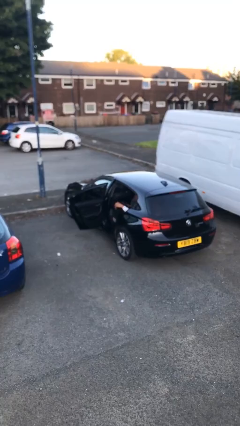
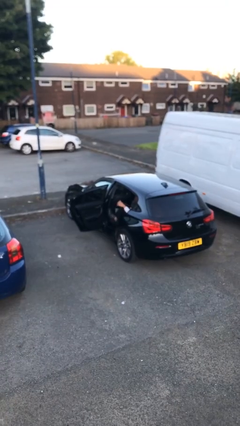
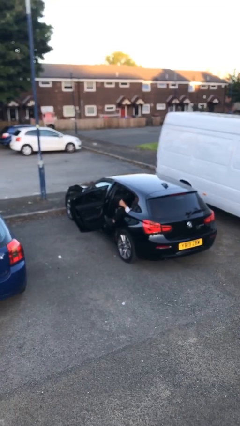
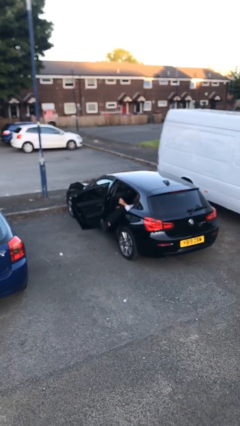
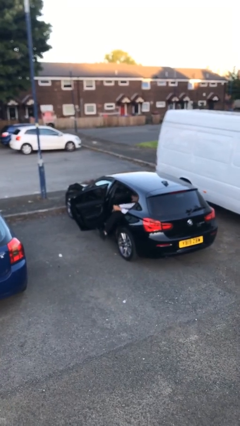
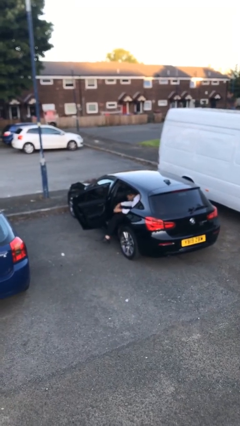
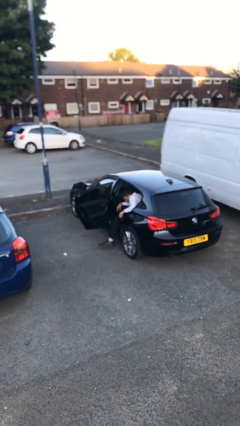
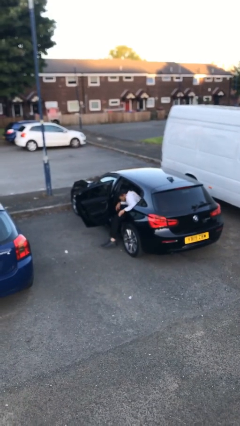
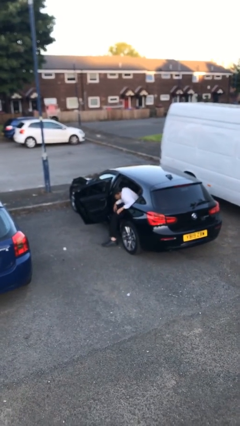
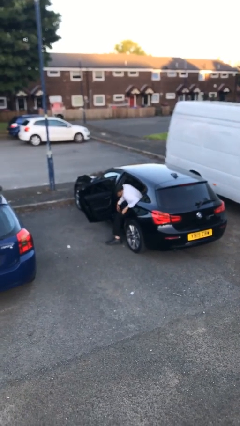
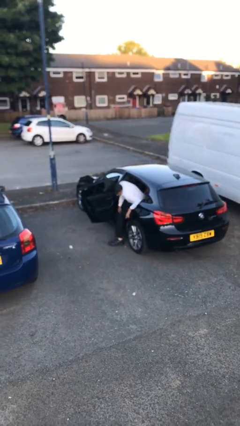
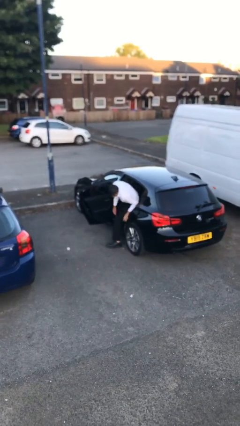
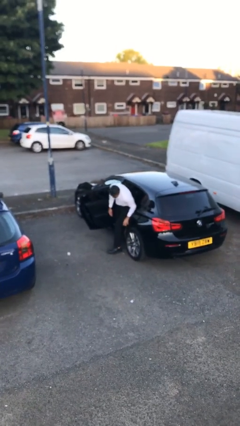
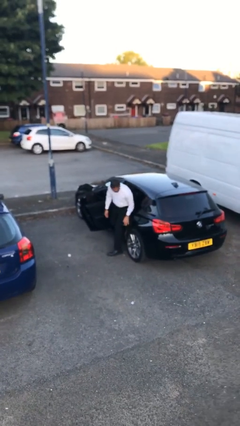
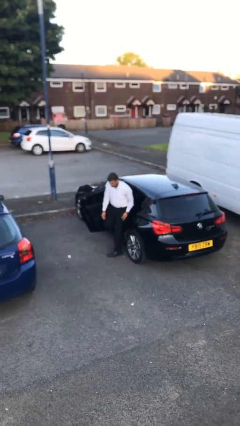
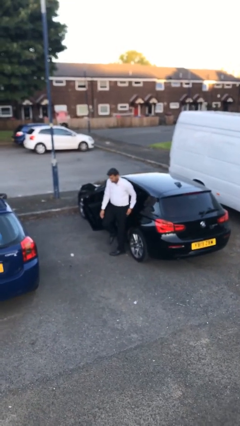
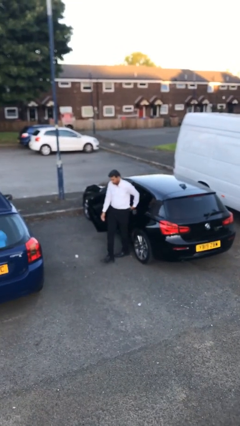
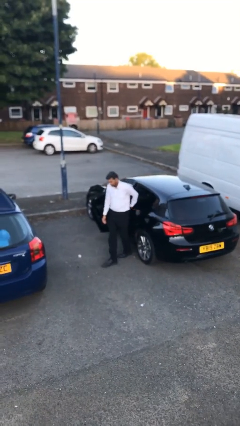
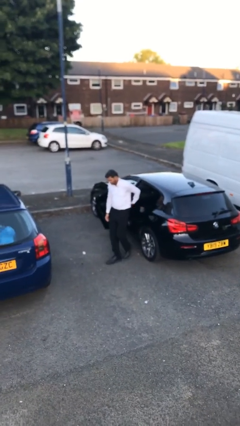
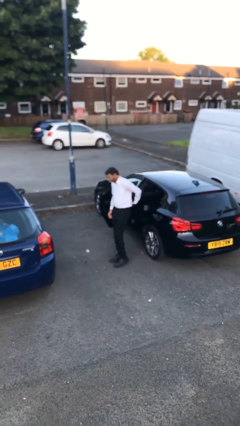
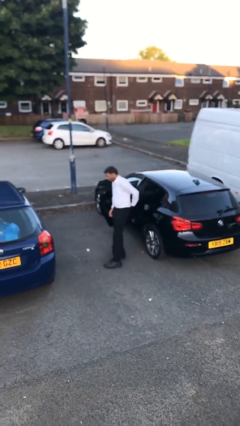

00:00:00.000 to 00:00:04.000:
person exits car

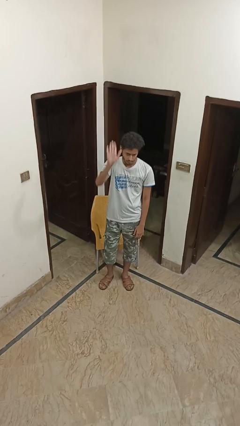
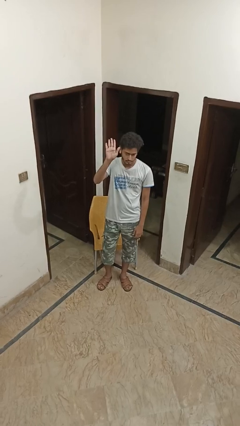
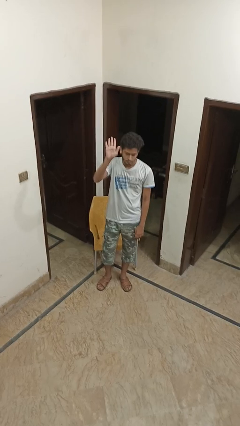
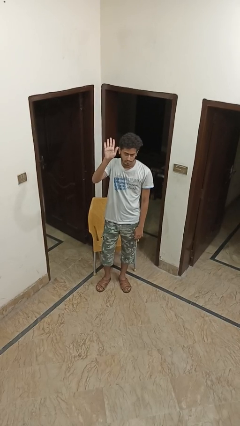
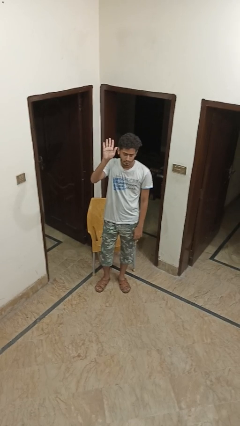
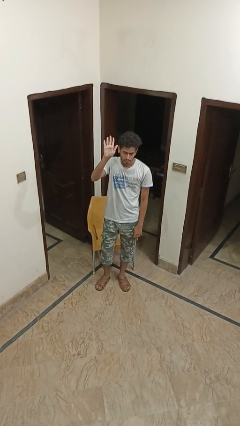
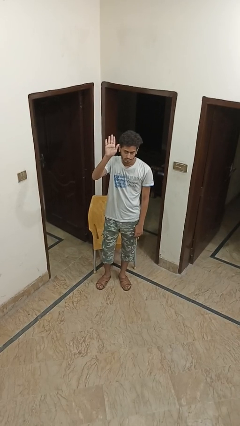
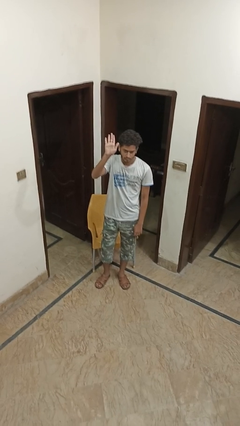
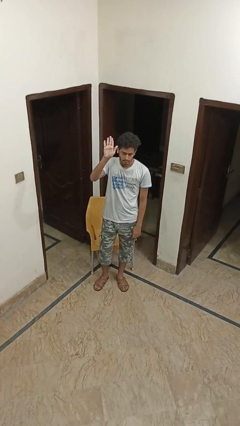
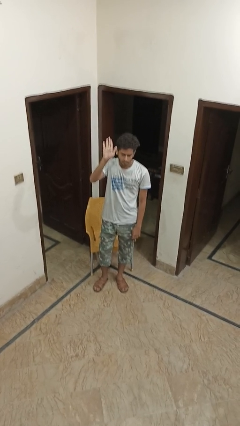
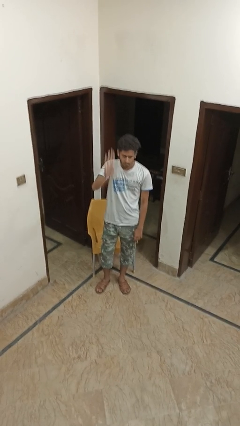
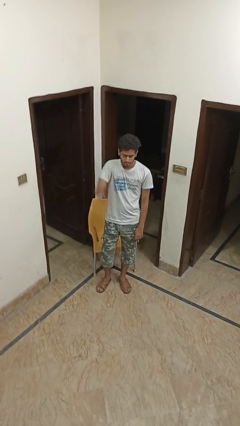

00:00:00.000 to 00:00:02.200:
person gestures raise hand

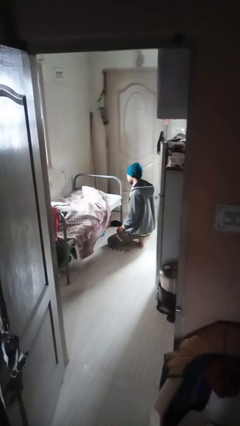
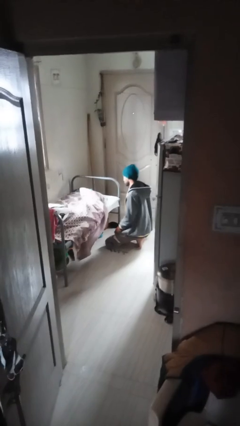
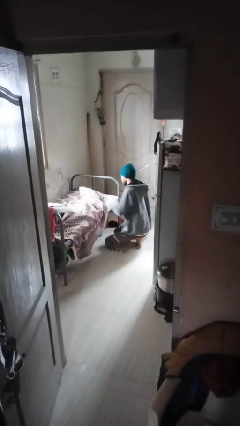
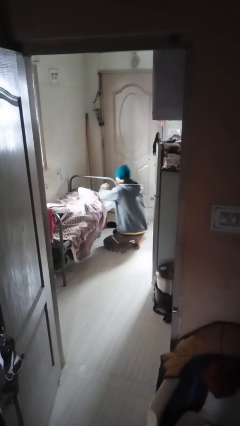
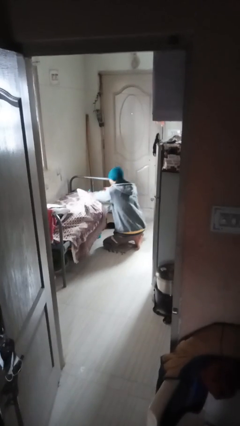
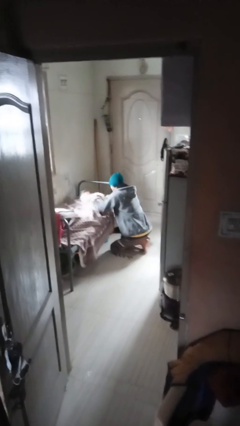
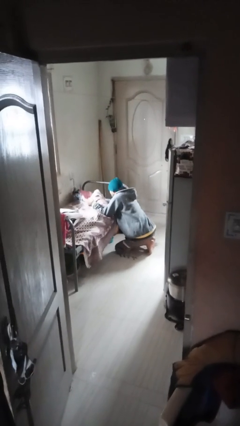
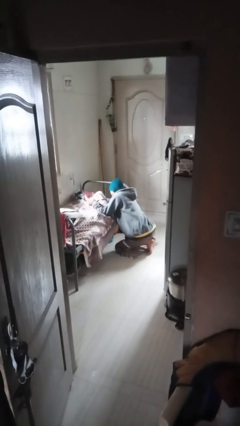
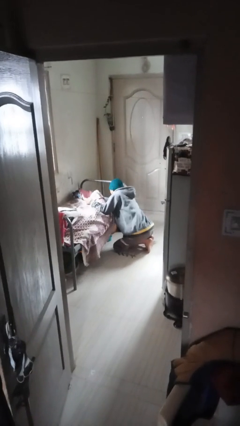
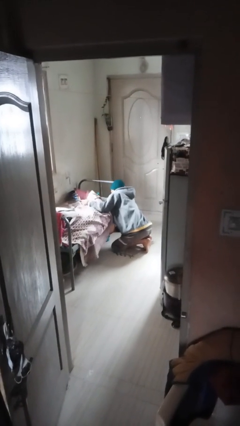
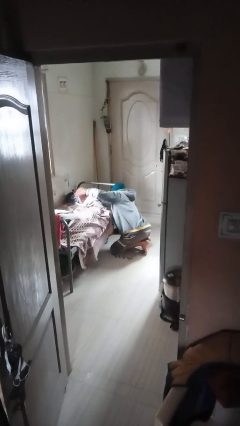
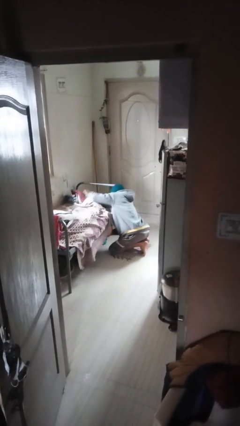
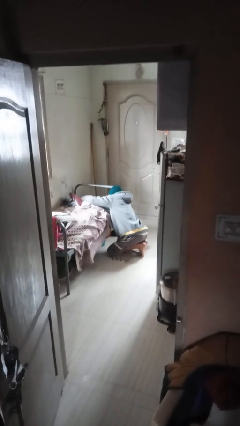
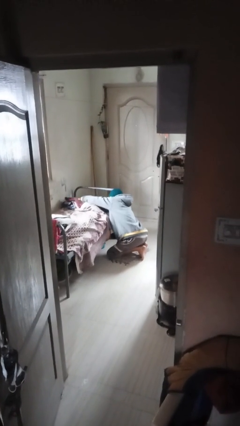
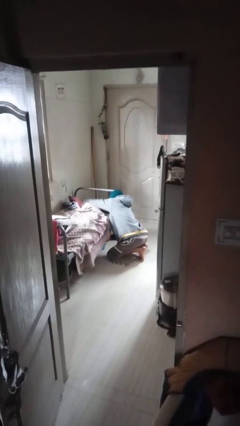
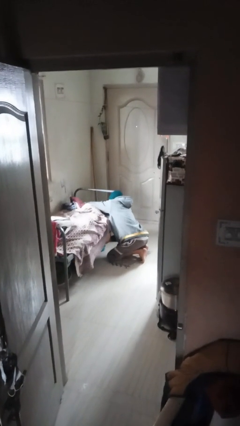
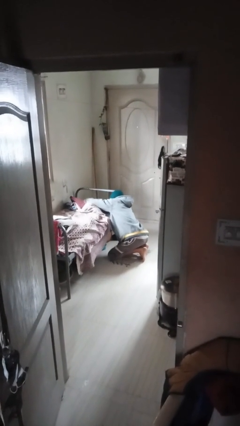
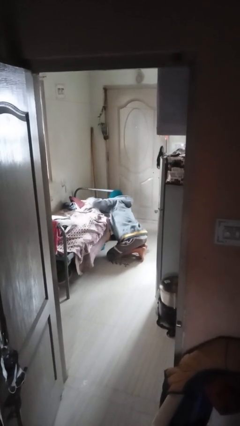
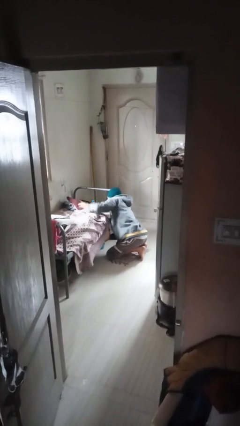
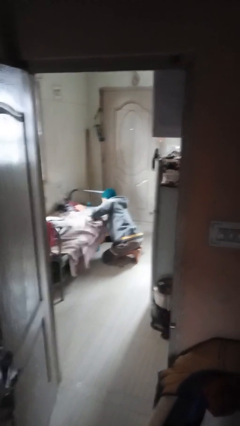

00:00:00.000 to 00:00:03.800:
person searches under couch

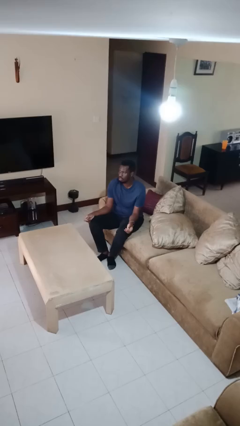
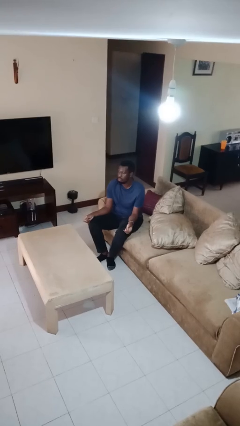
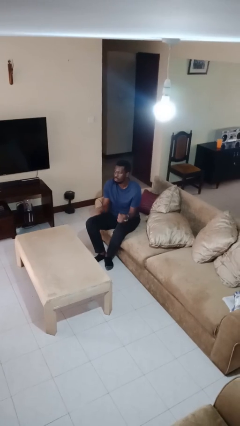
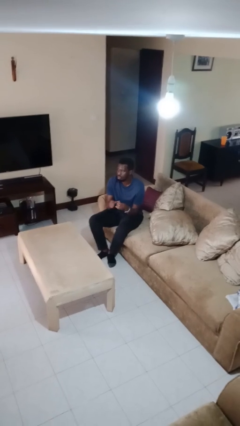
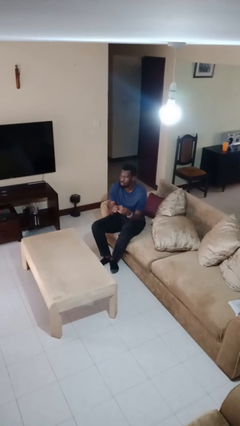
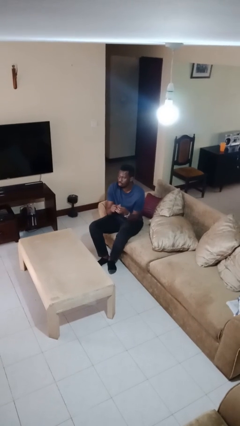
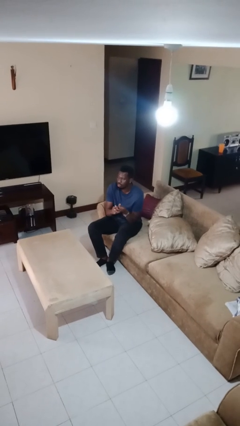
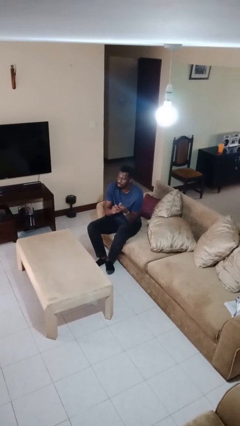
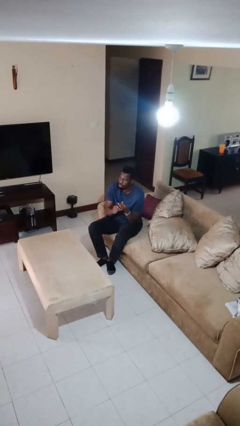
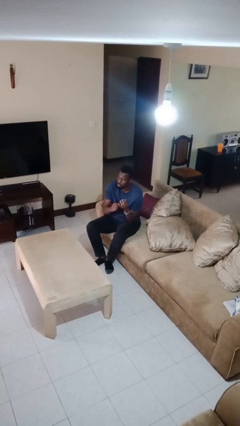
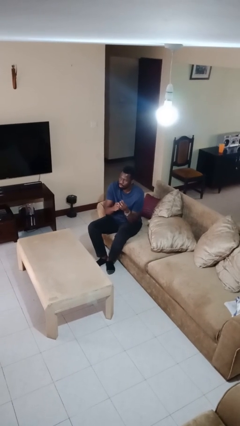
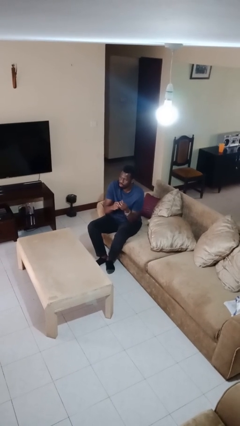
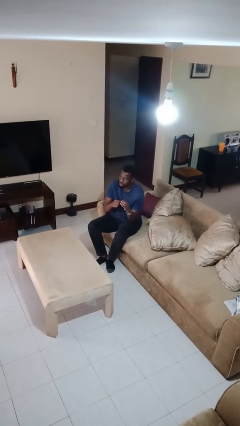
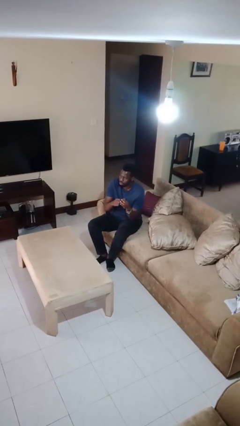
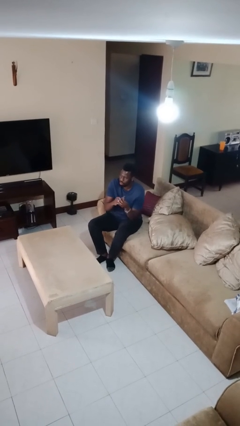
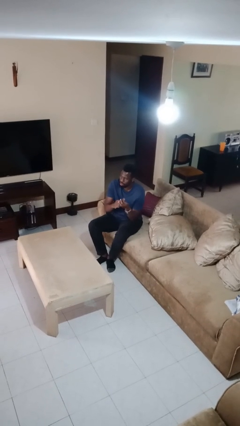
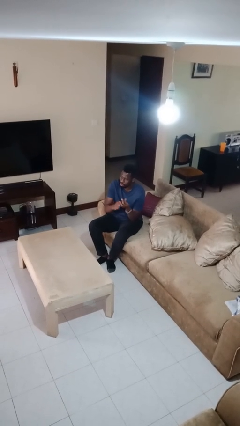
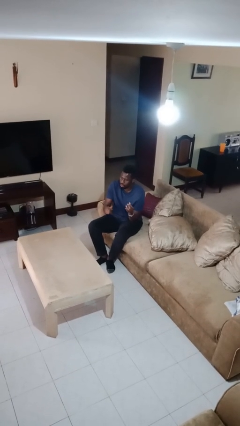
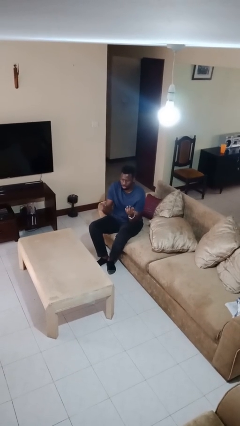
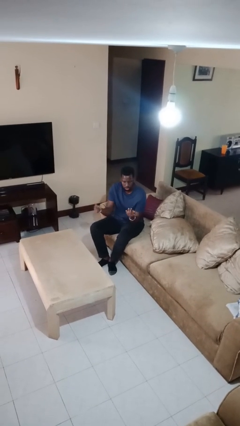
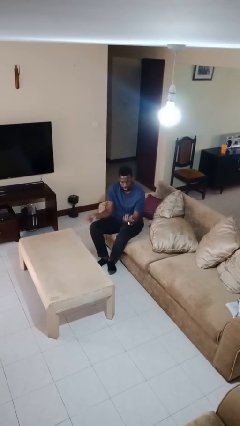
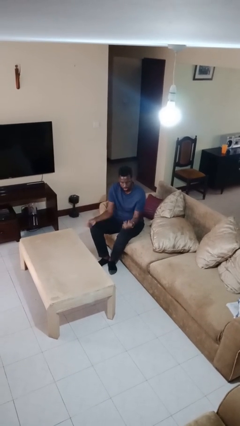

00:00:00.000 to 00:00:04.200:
person files fingernails

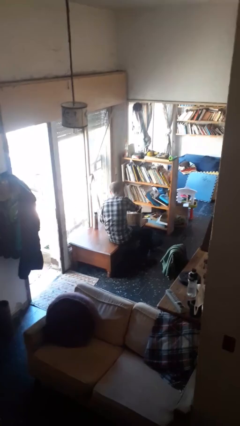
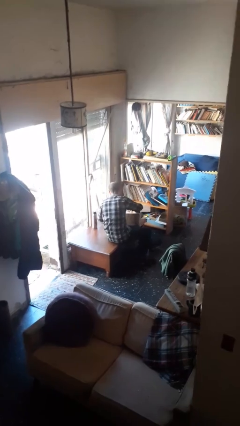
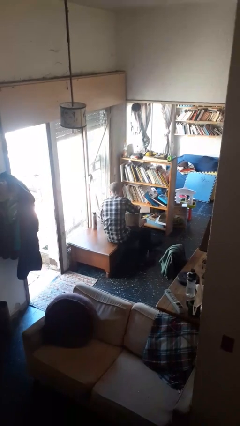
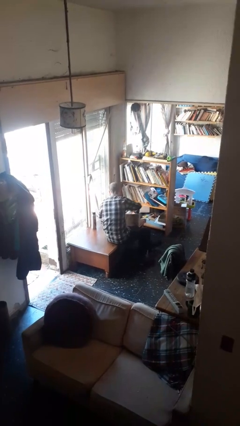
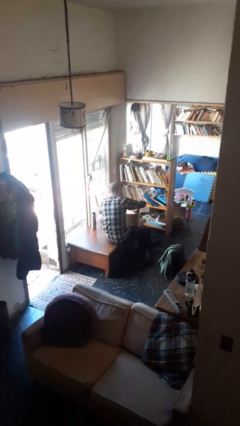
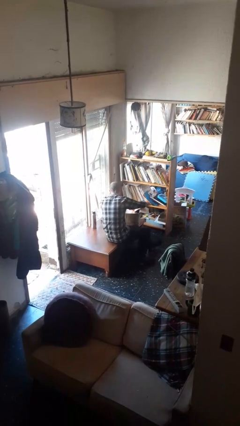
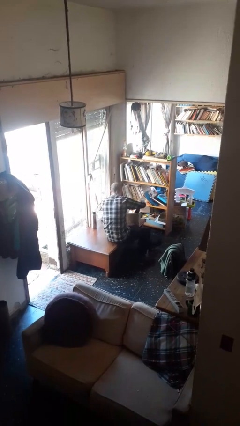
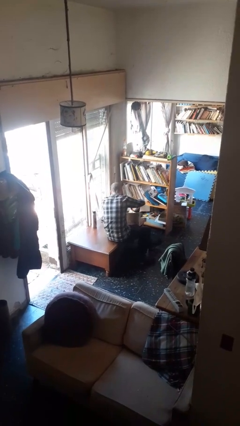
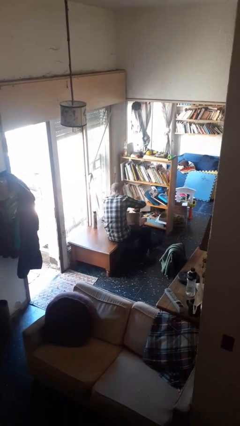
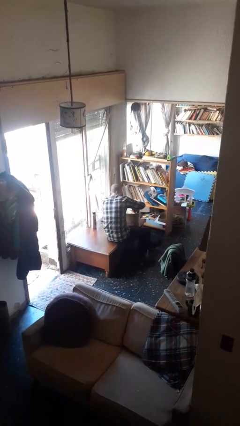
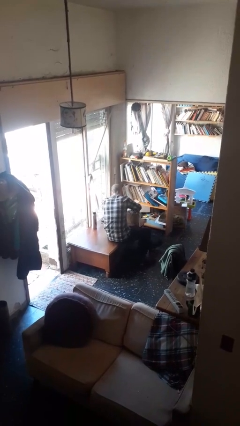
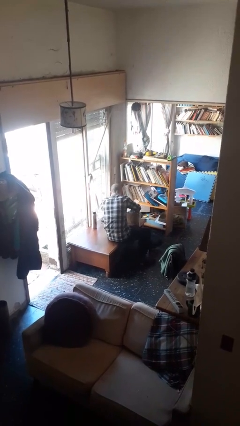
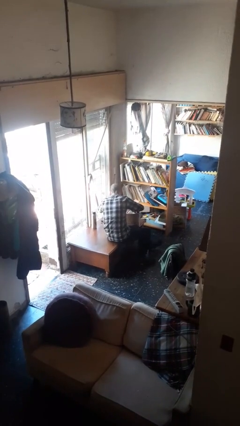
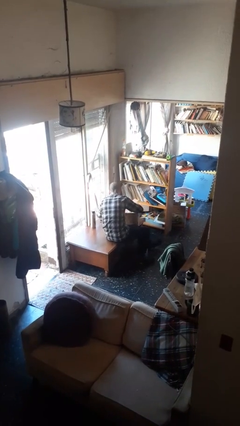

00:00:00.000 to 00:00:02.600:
person searches in box

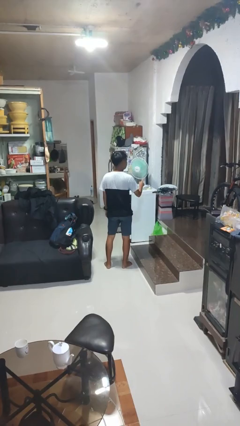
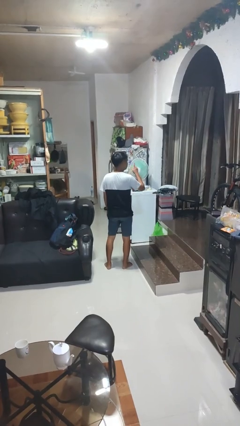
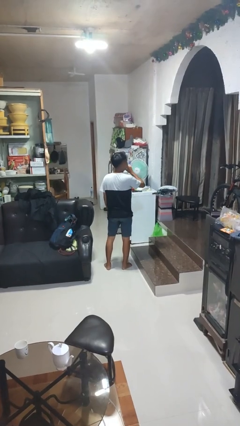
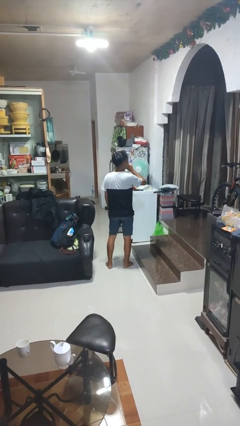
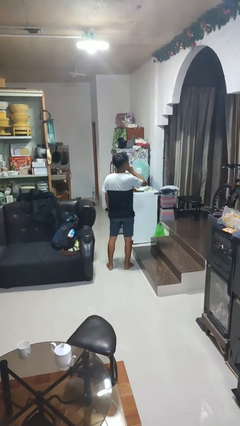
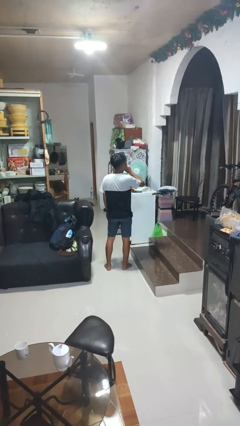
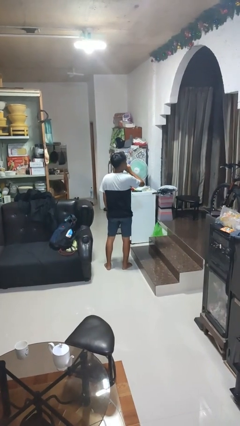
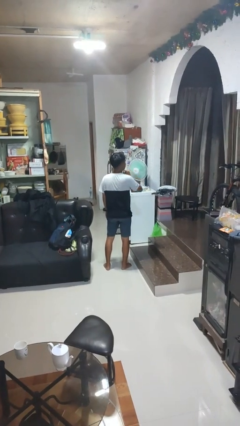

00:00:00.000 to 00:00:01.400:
person gestures be quiet
